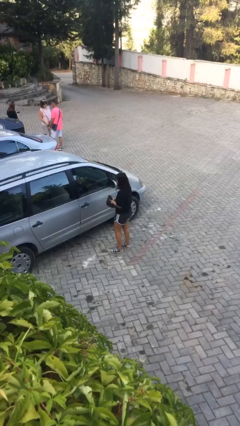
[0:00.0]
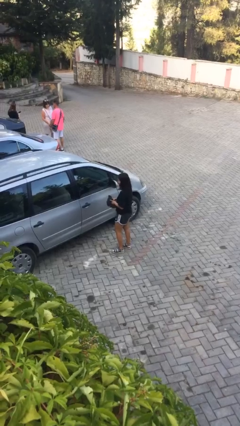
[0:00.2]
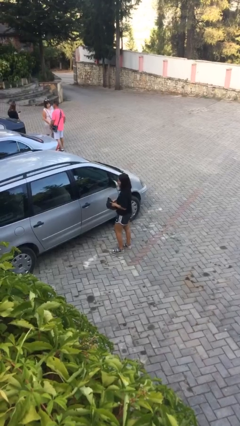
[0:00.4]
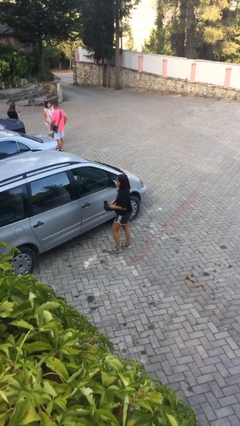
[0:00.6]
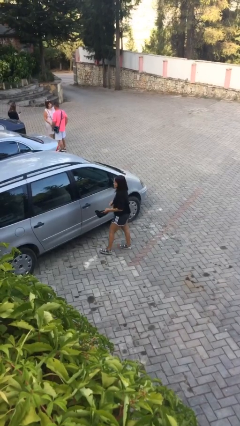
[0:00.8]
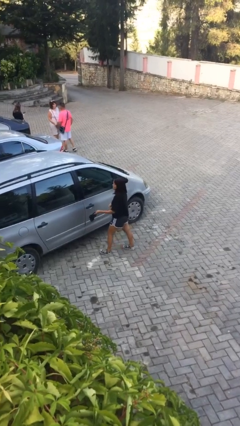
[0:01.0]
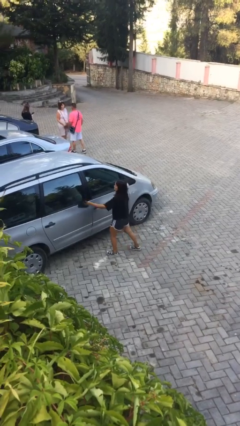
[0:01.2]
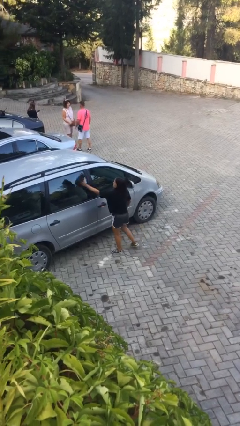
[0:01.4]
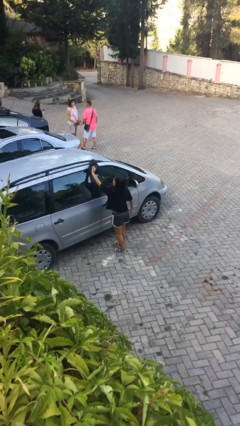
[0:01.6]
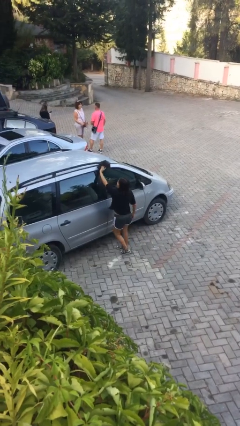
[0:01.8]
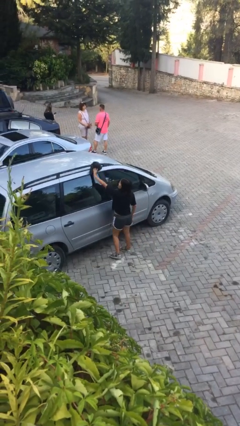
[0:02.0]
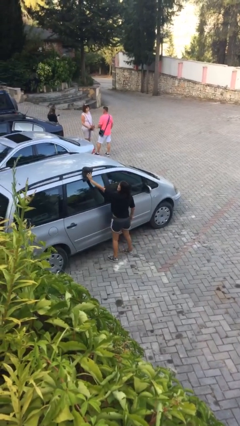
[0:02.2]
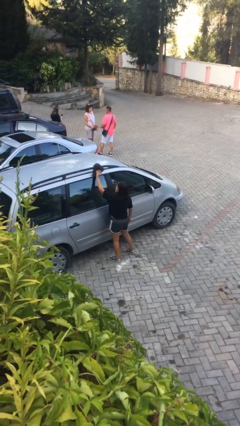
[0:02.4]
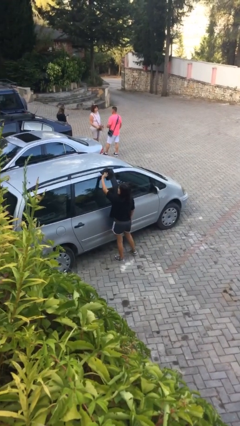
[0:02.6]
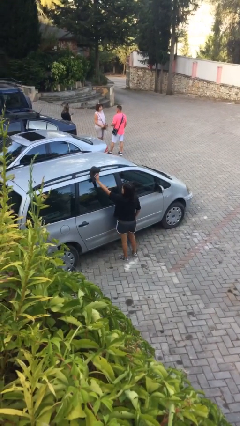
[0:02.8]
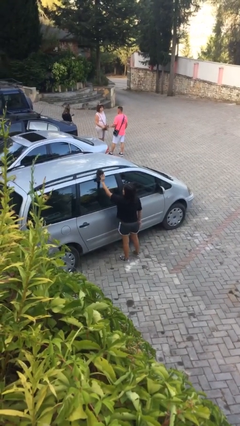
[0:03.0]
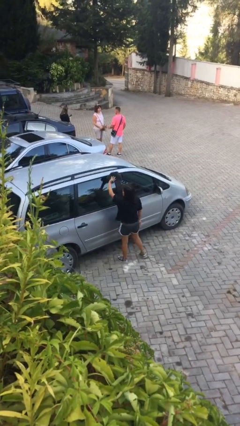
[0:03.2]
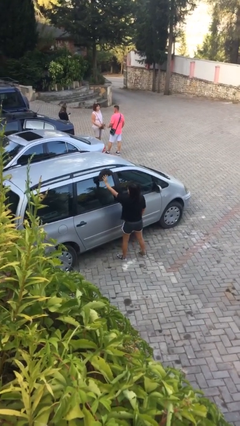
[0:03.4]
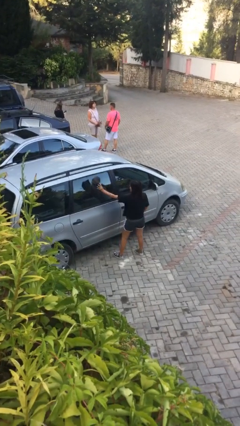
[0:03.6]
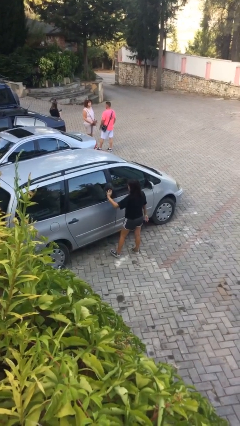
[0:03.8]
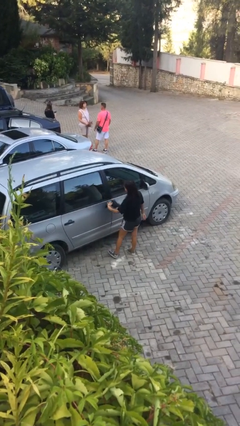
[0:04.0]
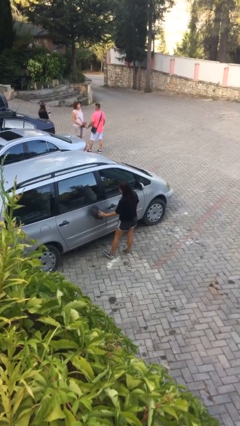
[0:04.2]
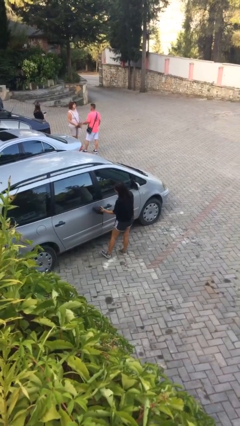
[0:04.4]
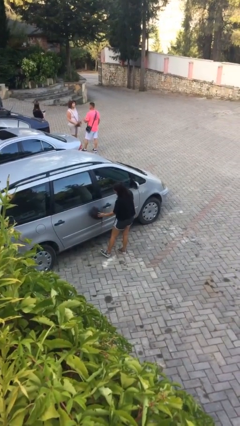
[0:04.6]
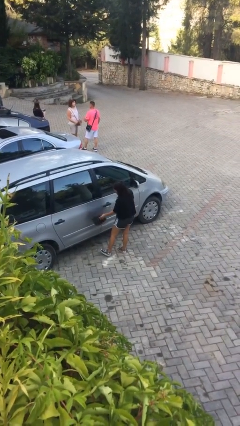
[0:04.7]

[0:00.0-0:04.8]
person polishes car with rag

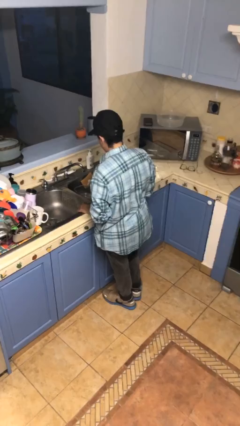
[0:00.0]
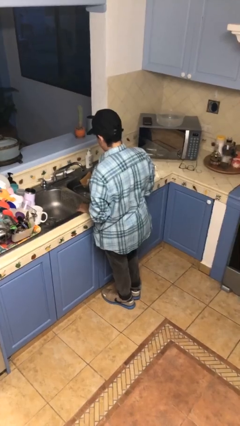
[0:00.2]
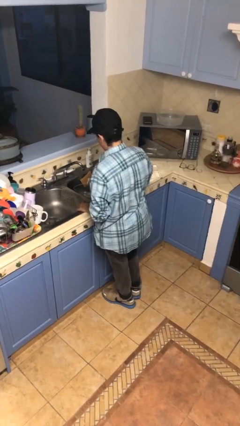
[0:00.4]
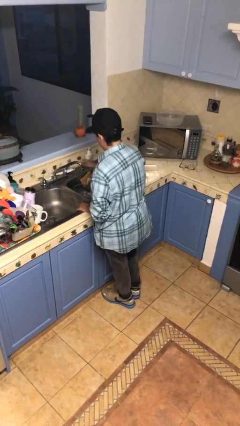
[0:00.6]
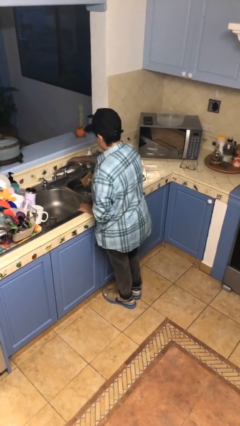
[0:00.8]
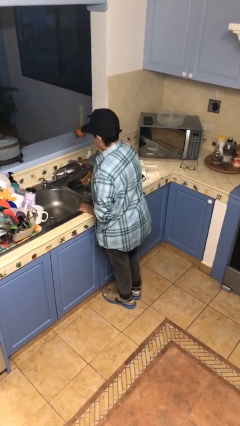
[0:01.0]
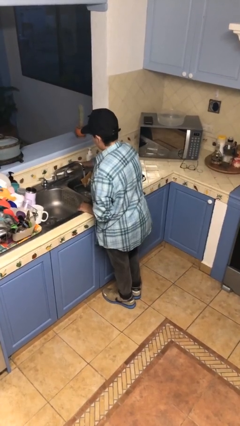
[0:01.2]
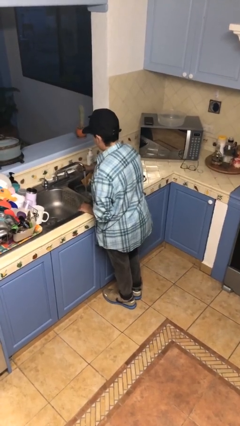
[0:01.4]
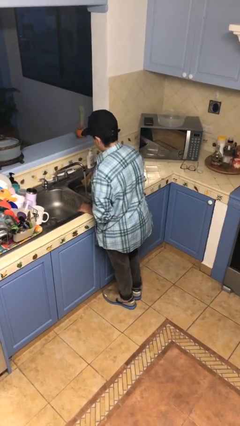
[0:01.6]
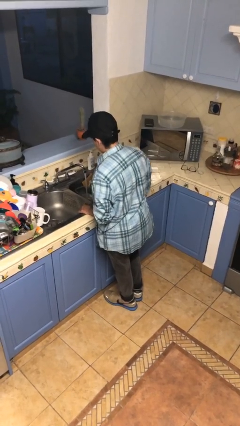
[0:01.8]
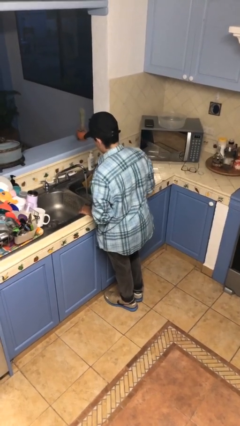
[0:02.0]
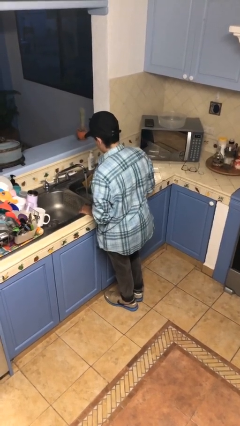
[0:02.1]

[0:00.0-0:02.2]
person turns on faucet

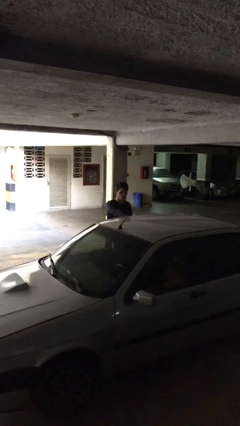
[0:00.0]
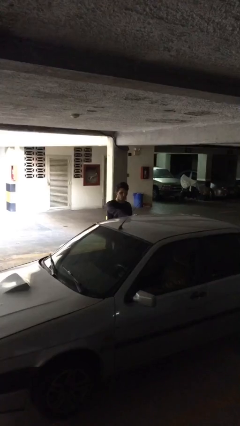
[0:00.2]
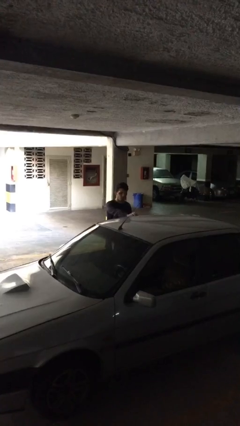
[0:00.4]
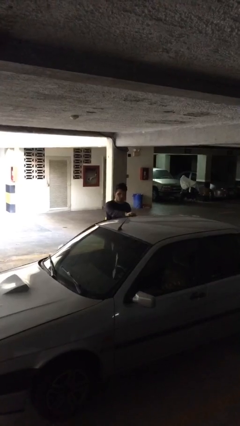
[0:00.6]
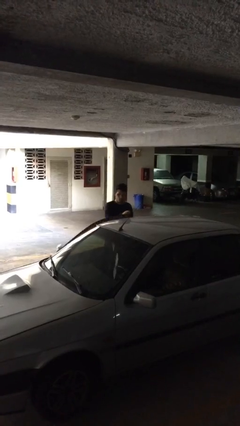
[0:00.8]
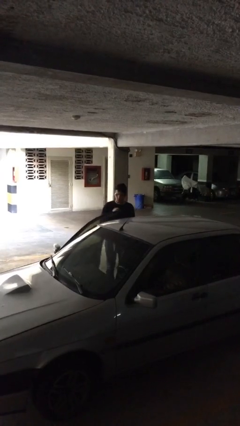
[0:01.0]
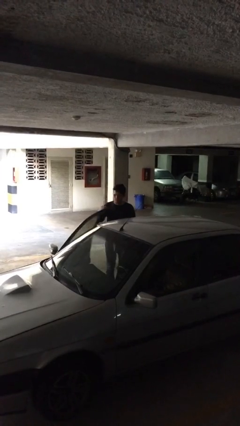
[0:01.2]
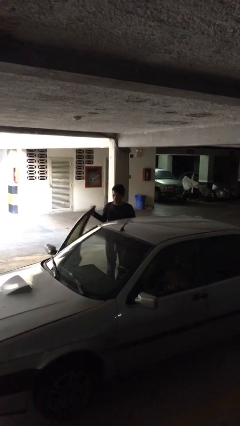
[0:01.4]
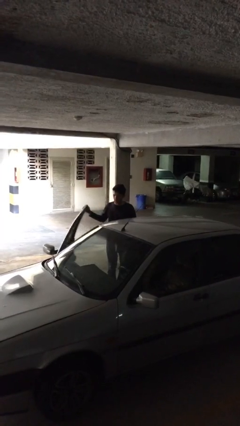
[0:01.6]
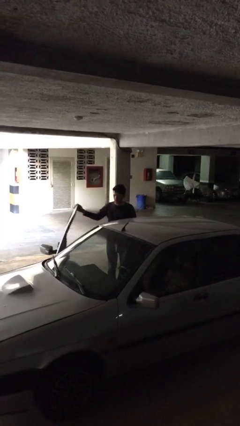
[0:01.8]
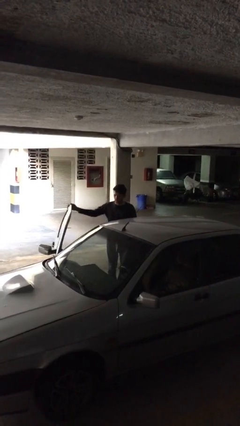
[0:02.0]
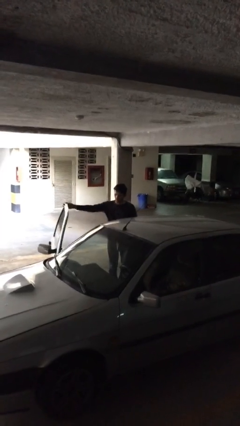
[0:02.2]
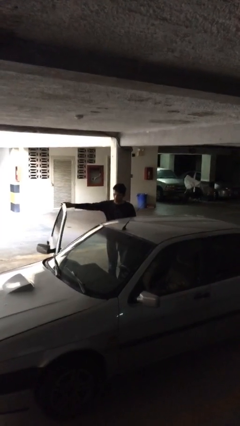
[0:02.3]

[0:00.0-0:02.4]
person opens car door

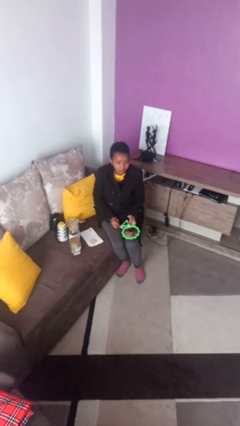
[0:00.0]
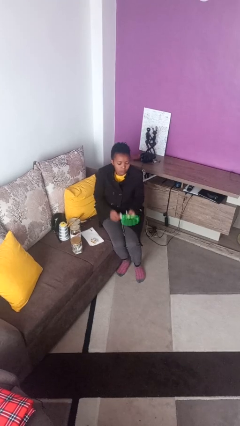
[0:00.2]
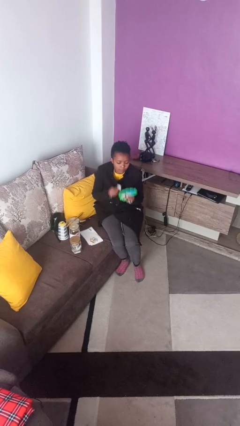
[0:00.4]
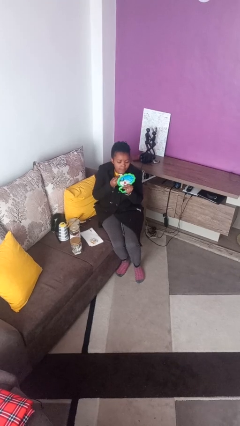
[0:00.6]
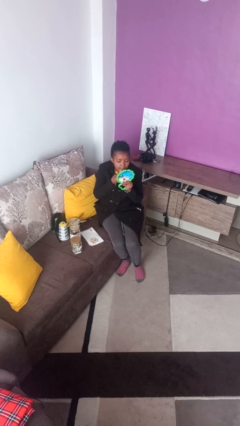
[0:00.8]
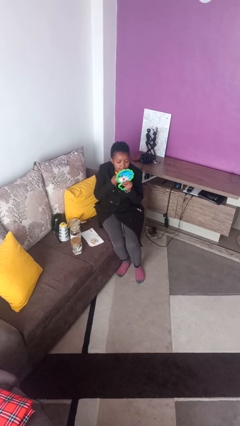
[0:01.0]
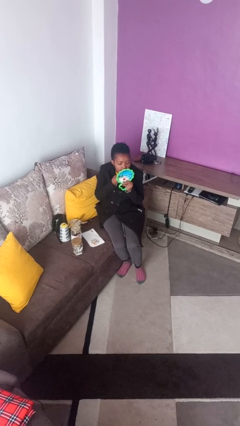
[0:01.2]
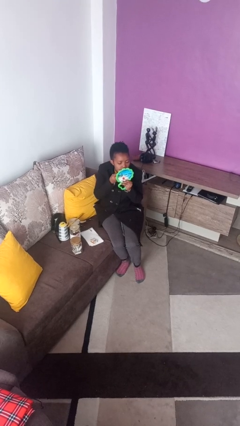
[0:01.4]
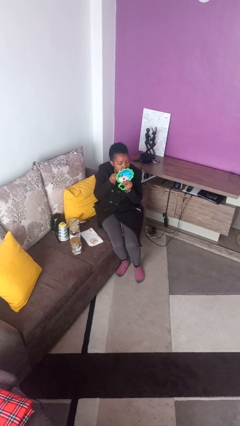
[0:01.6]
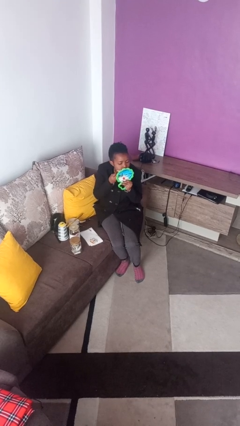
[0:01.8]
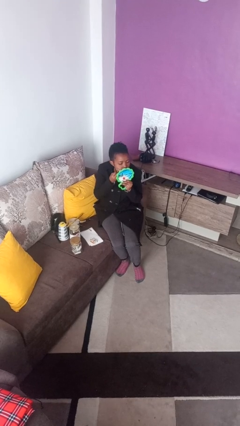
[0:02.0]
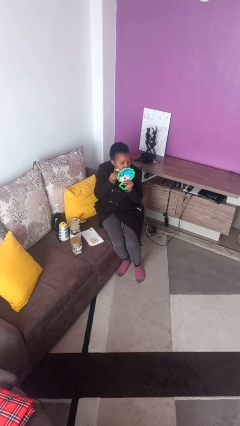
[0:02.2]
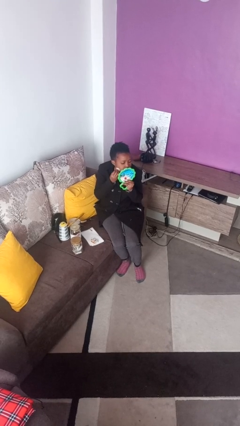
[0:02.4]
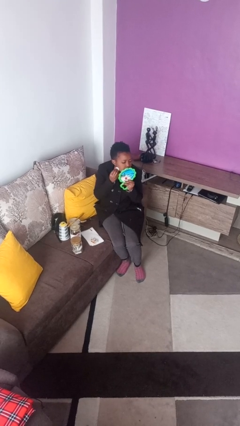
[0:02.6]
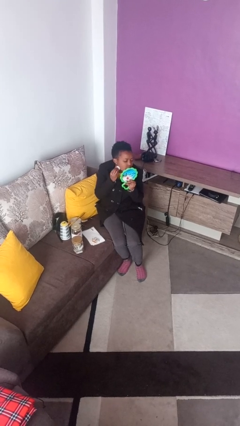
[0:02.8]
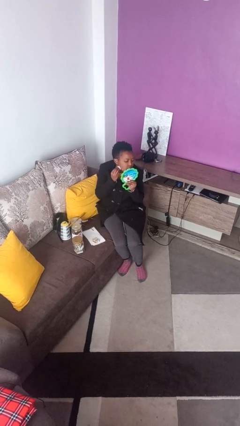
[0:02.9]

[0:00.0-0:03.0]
person applies foundation makeup

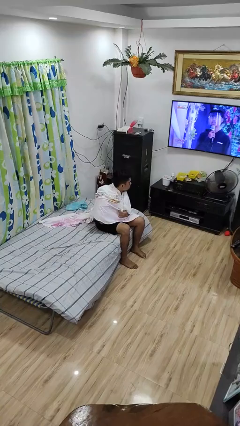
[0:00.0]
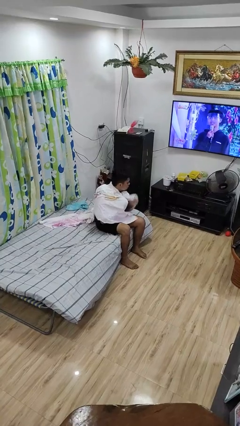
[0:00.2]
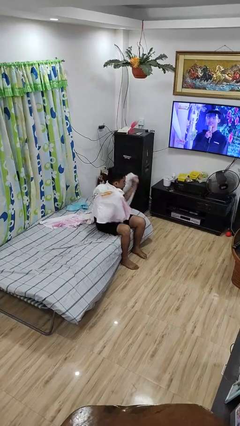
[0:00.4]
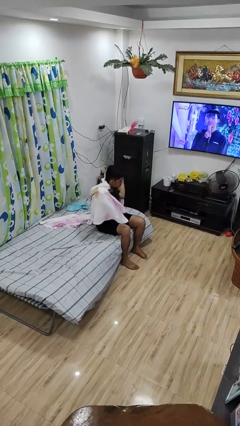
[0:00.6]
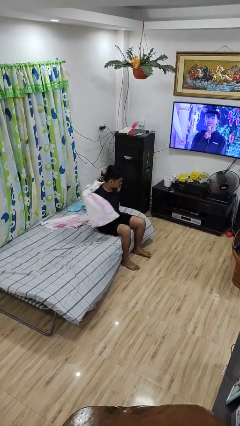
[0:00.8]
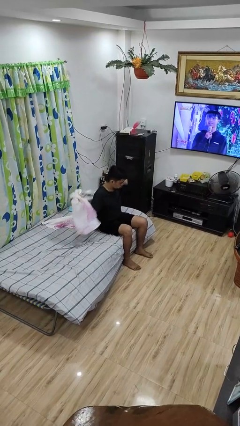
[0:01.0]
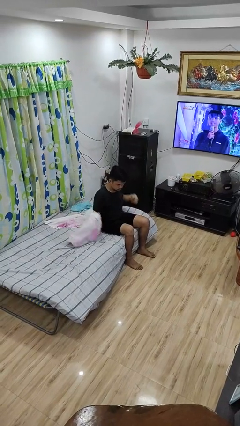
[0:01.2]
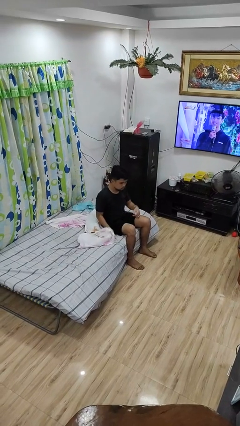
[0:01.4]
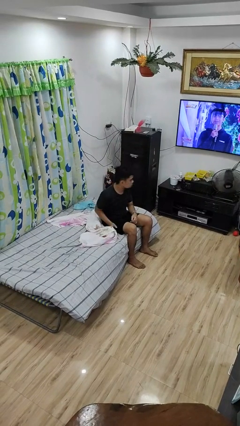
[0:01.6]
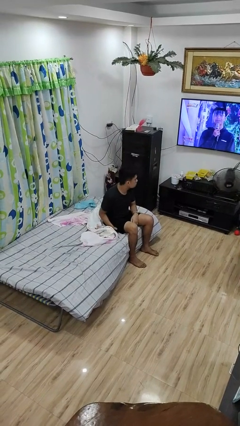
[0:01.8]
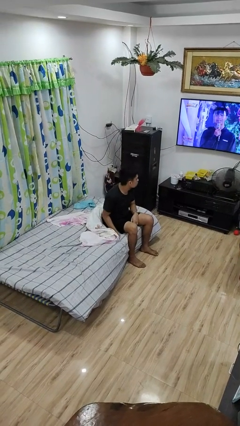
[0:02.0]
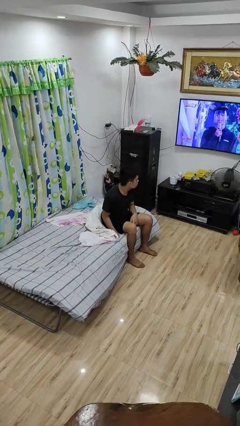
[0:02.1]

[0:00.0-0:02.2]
person uncovers with blanket

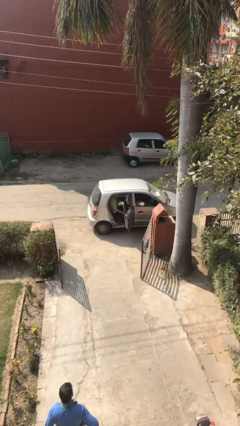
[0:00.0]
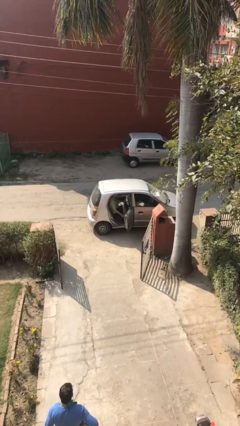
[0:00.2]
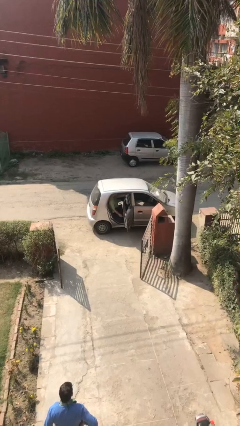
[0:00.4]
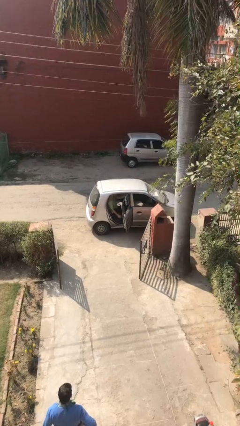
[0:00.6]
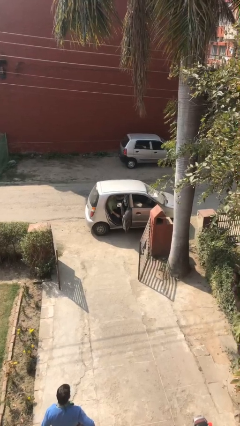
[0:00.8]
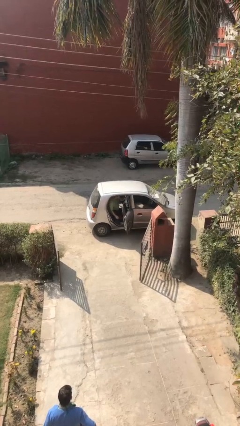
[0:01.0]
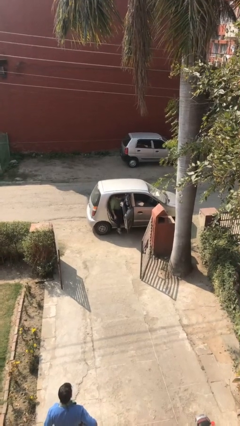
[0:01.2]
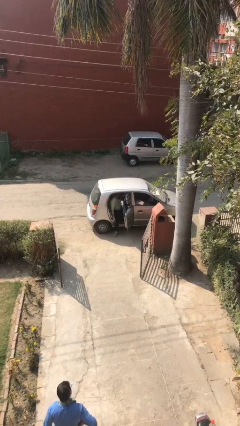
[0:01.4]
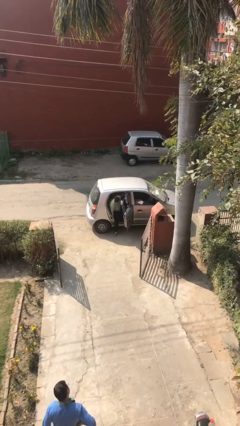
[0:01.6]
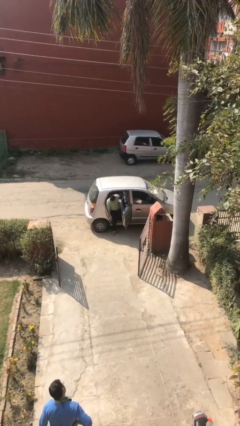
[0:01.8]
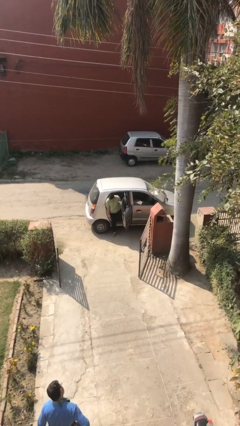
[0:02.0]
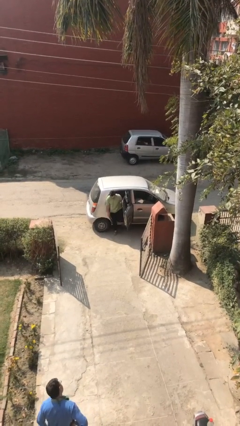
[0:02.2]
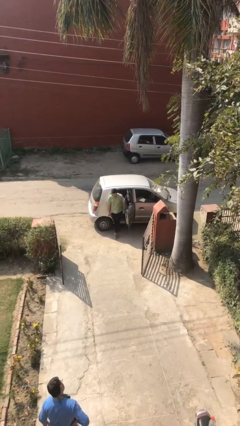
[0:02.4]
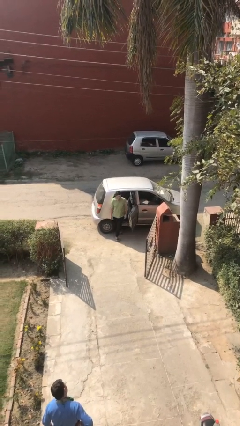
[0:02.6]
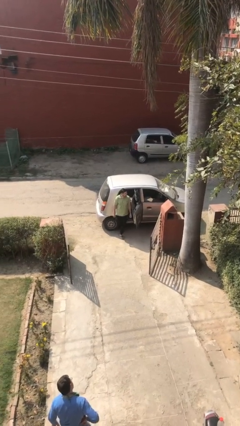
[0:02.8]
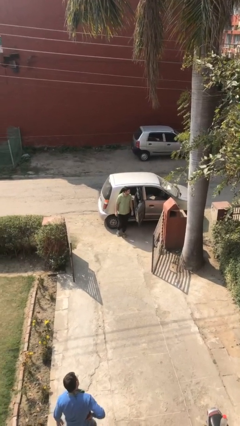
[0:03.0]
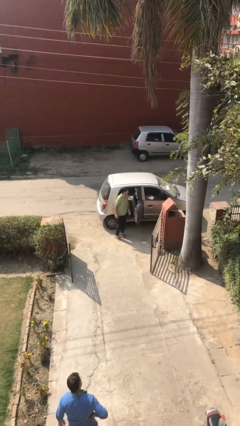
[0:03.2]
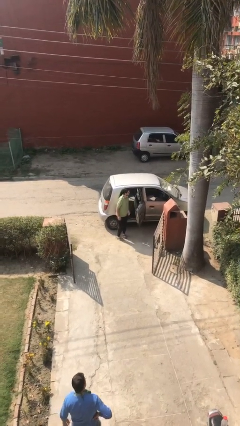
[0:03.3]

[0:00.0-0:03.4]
person exits car
